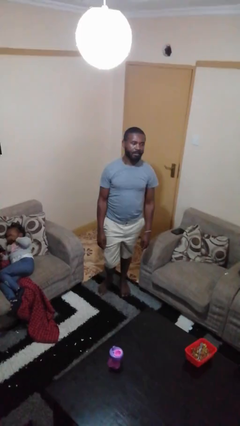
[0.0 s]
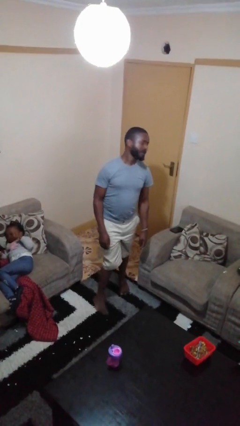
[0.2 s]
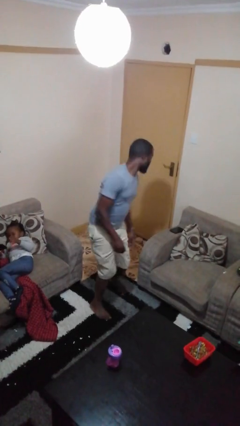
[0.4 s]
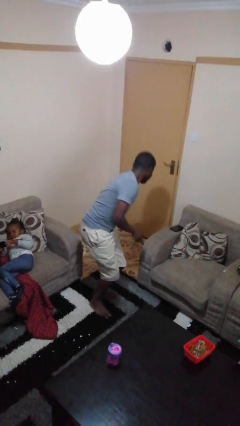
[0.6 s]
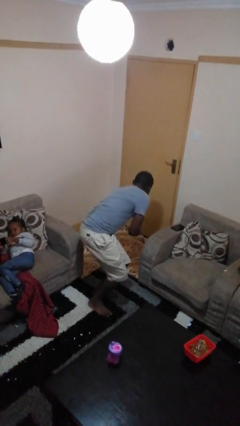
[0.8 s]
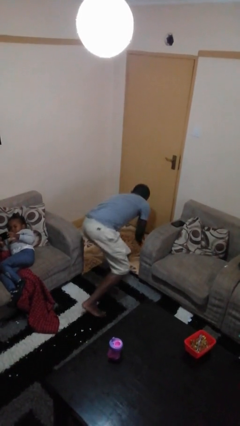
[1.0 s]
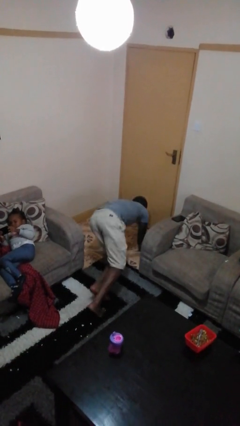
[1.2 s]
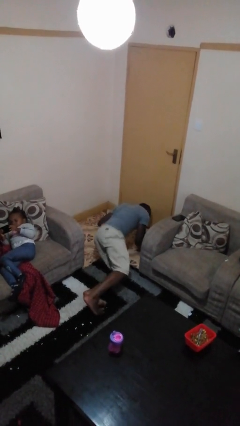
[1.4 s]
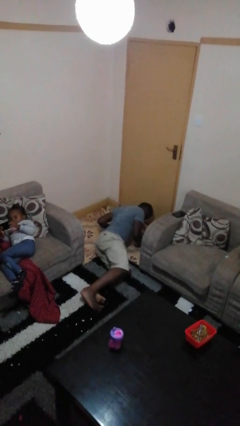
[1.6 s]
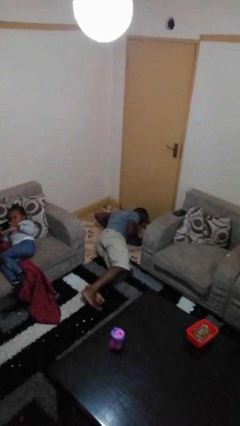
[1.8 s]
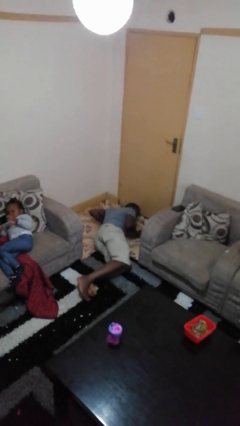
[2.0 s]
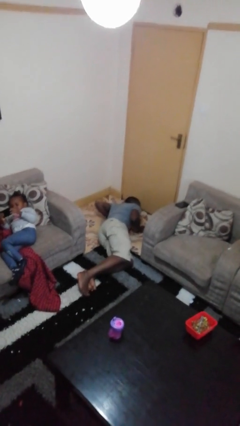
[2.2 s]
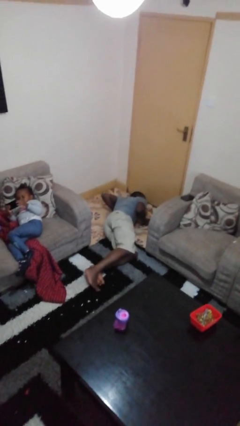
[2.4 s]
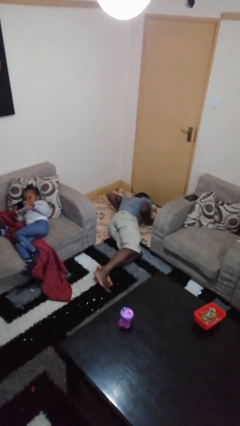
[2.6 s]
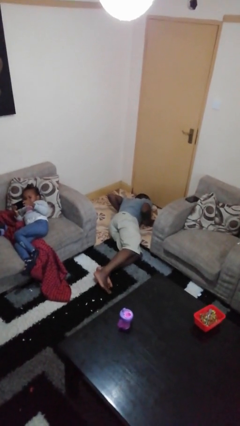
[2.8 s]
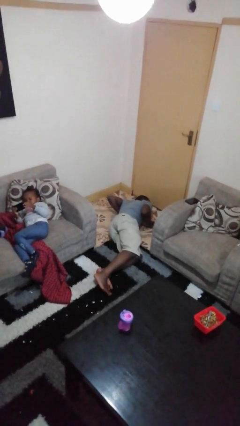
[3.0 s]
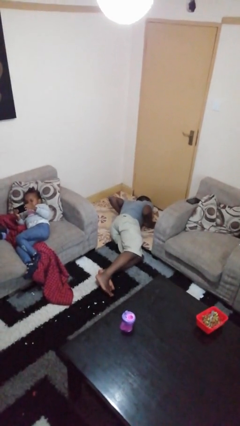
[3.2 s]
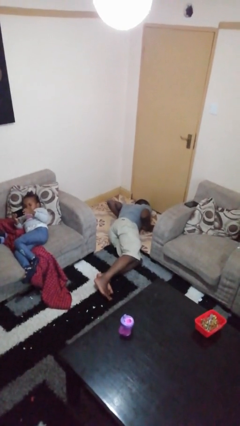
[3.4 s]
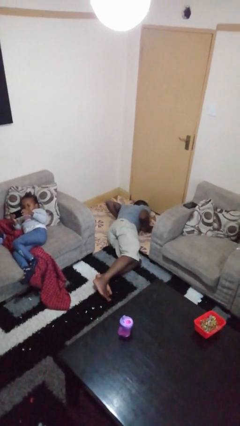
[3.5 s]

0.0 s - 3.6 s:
person falls while standing

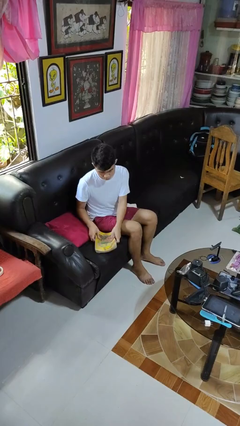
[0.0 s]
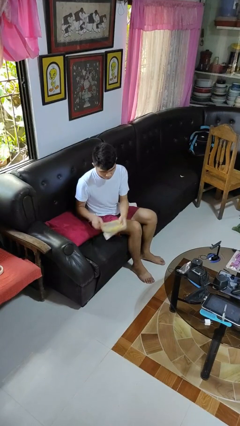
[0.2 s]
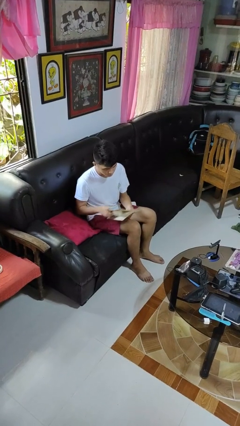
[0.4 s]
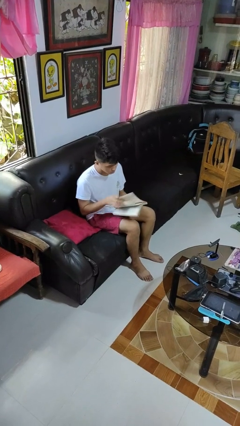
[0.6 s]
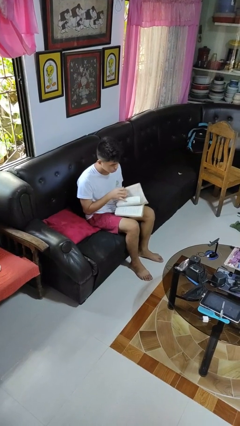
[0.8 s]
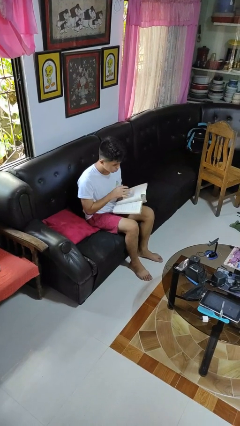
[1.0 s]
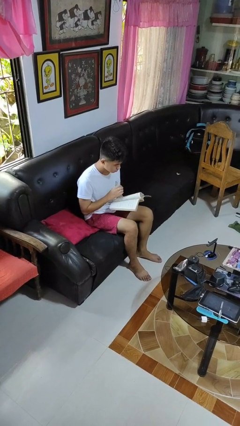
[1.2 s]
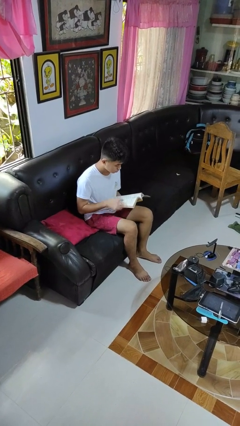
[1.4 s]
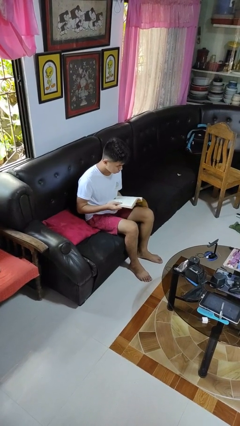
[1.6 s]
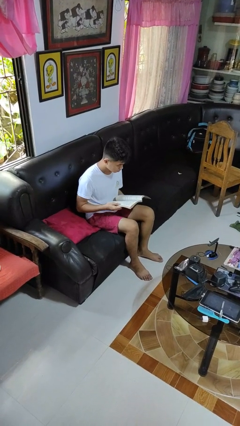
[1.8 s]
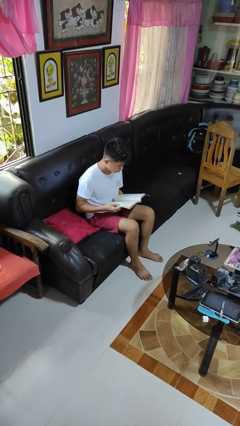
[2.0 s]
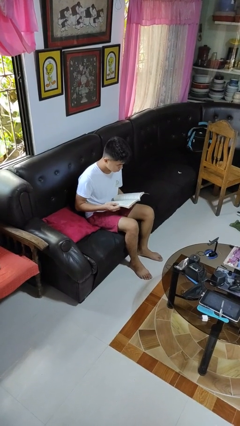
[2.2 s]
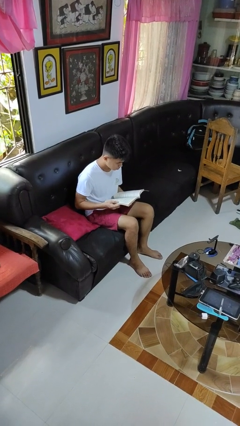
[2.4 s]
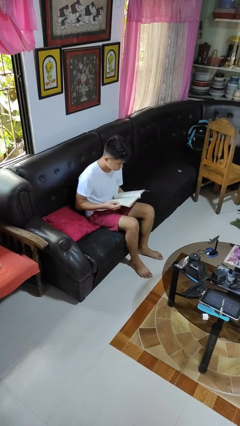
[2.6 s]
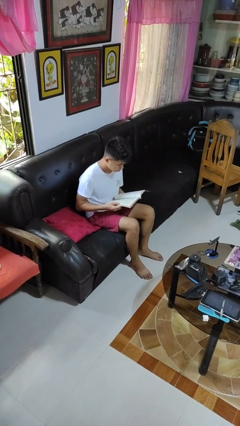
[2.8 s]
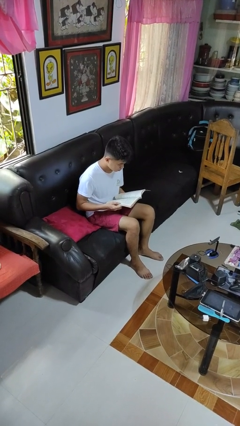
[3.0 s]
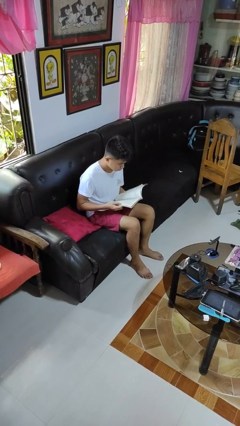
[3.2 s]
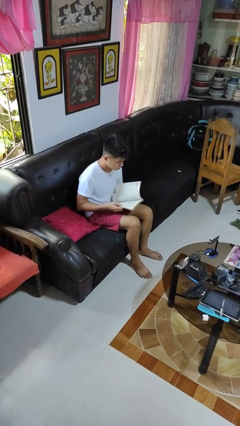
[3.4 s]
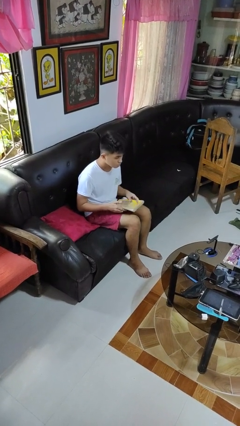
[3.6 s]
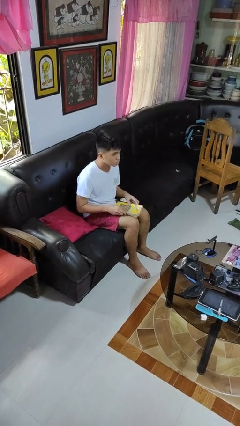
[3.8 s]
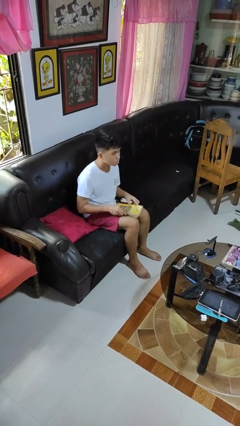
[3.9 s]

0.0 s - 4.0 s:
person reads book

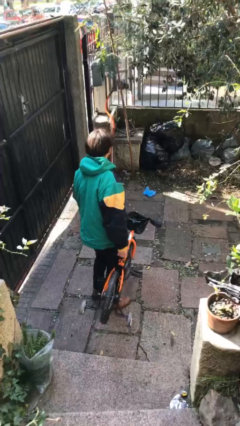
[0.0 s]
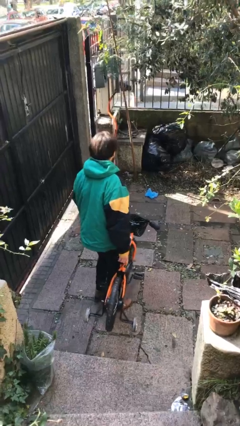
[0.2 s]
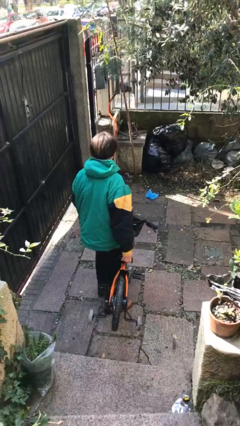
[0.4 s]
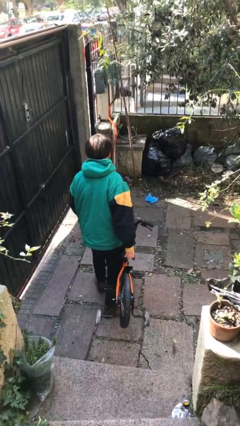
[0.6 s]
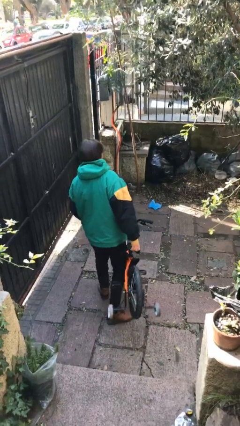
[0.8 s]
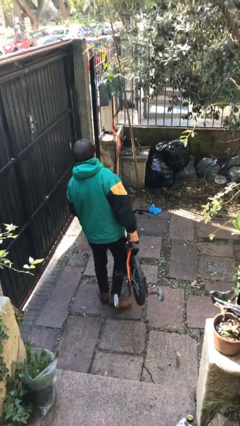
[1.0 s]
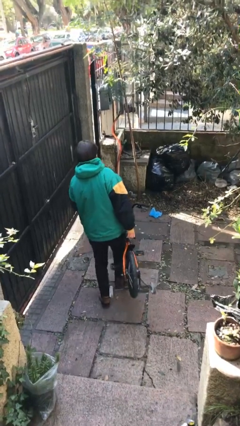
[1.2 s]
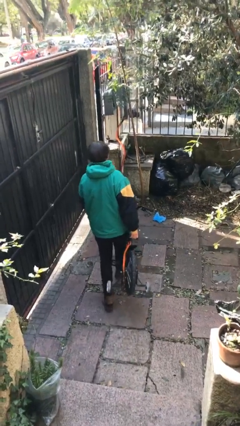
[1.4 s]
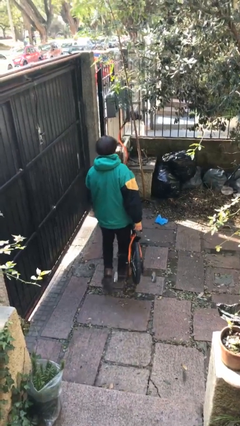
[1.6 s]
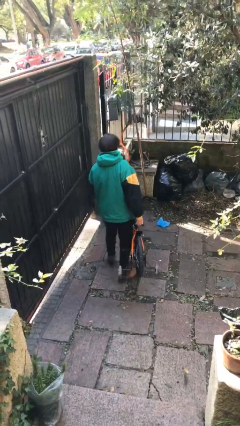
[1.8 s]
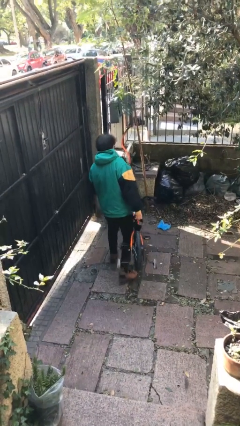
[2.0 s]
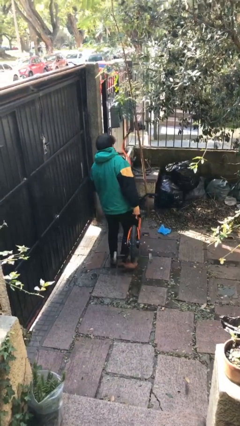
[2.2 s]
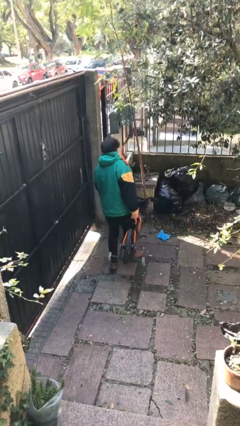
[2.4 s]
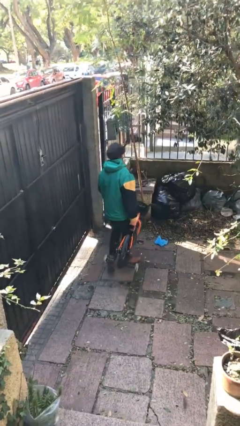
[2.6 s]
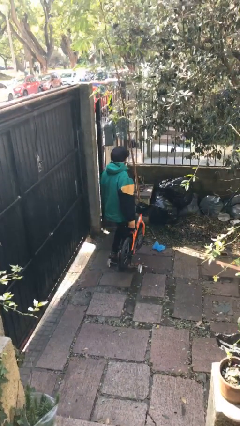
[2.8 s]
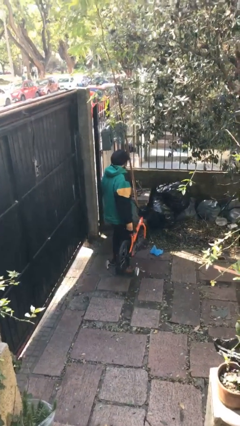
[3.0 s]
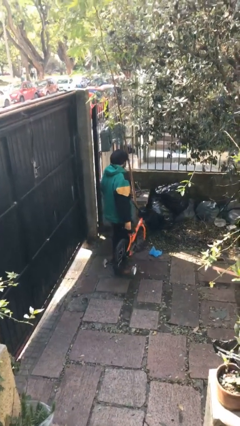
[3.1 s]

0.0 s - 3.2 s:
person carries bicycle

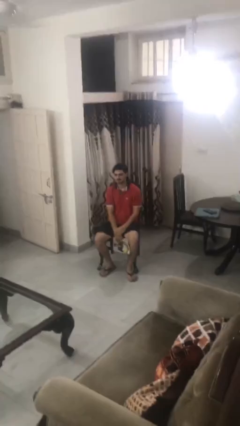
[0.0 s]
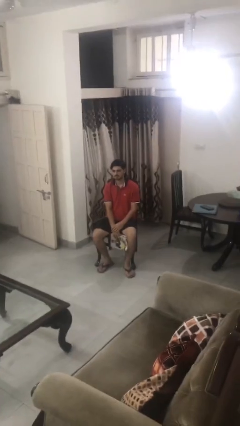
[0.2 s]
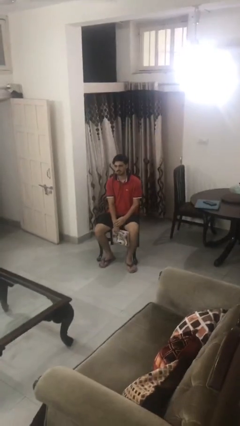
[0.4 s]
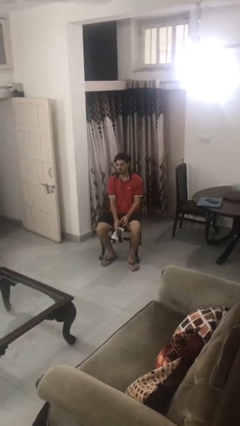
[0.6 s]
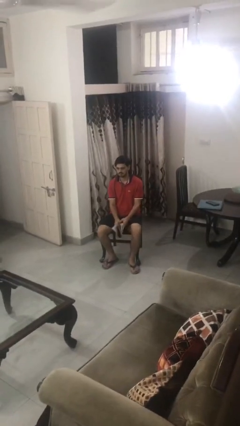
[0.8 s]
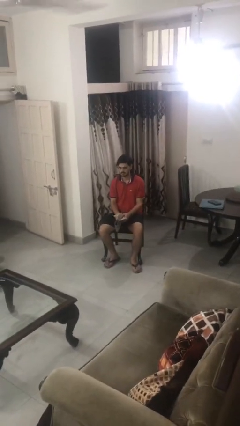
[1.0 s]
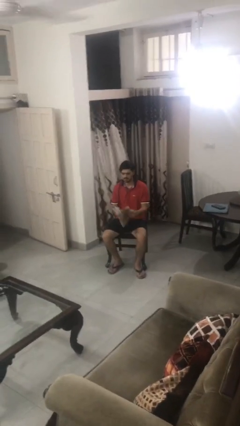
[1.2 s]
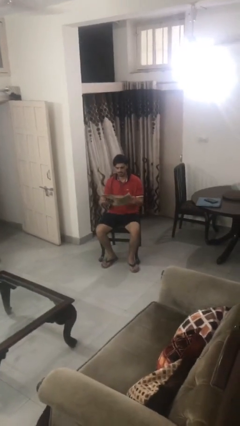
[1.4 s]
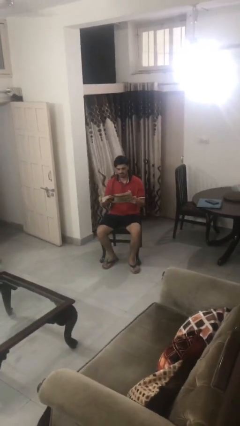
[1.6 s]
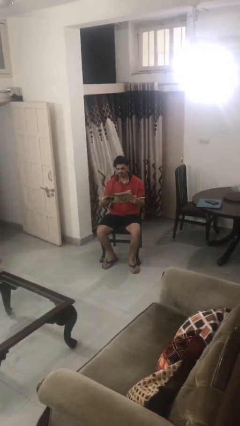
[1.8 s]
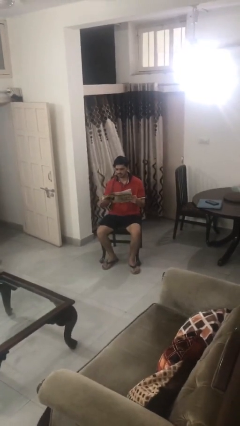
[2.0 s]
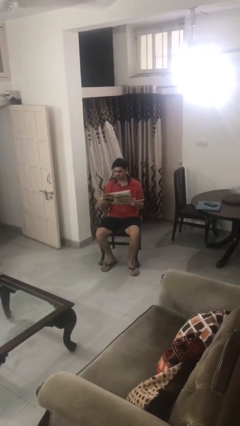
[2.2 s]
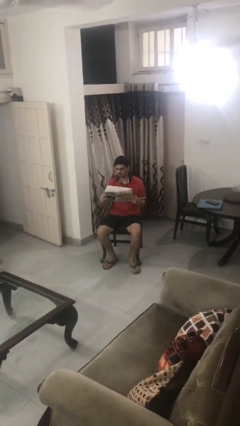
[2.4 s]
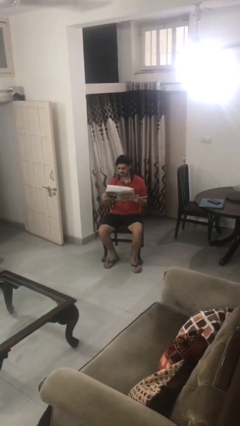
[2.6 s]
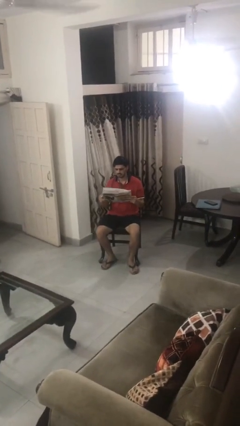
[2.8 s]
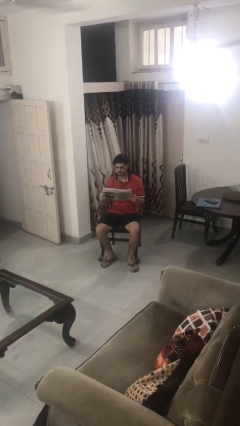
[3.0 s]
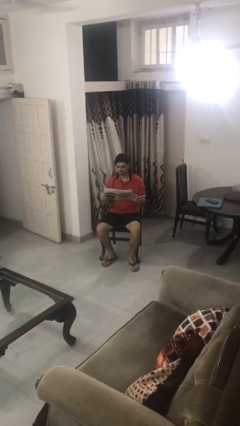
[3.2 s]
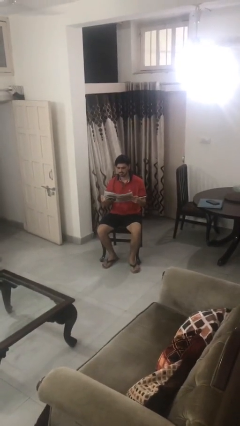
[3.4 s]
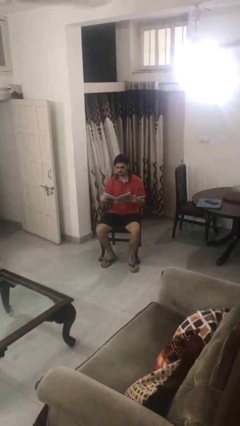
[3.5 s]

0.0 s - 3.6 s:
person reads newspaper

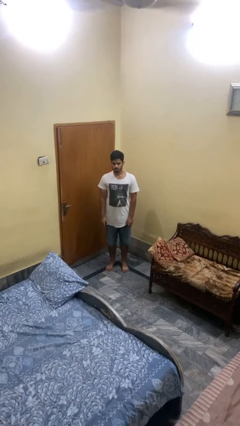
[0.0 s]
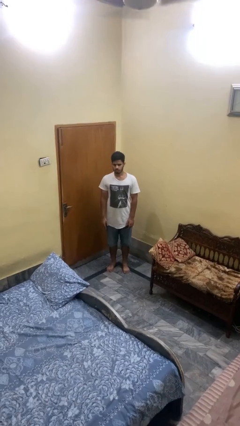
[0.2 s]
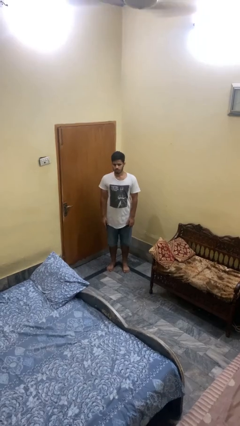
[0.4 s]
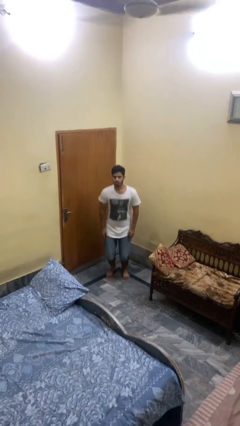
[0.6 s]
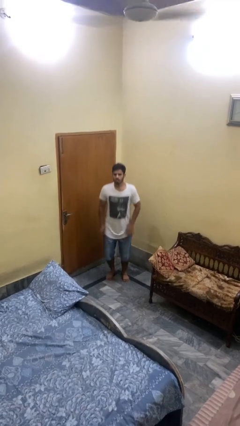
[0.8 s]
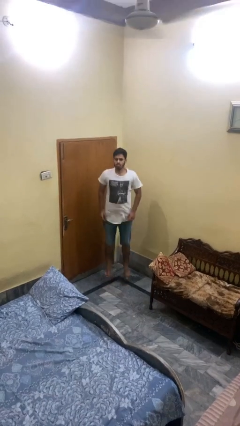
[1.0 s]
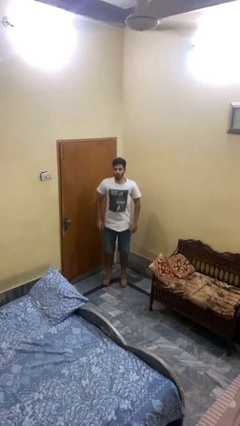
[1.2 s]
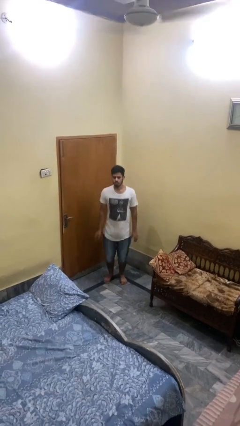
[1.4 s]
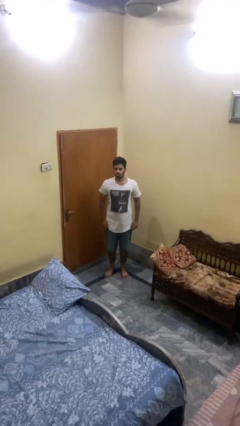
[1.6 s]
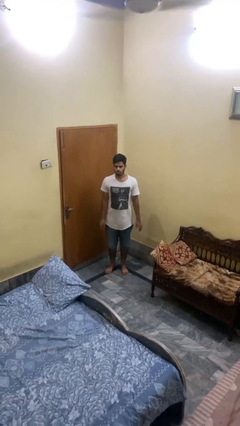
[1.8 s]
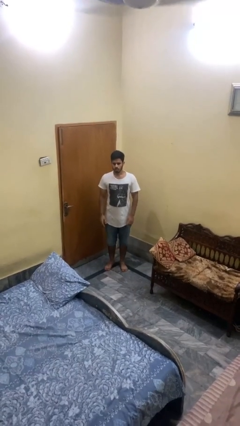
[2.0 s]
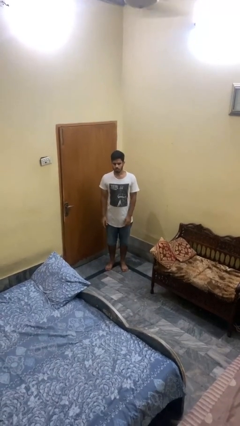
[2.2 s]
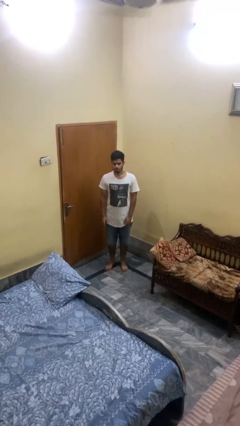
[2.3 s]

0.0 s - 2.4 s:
person jumps

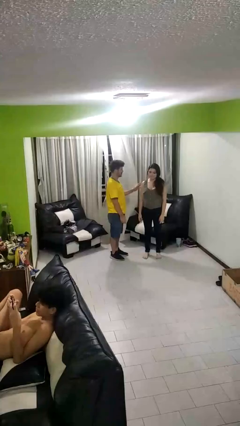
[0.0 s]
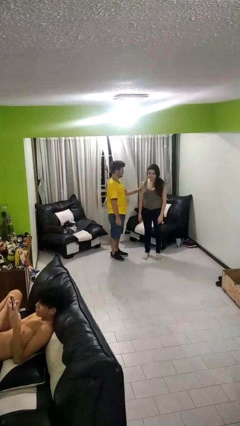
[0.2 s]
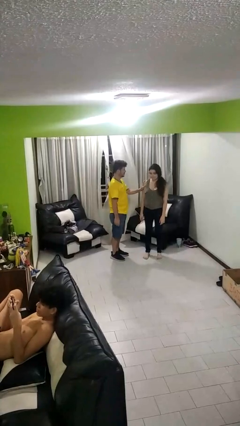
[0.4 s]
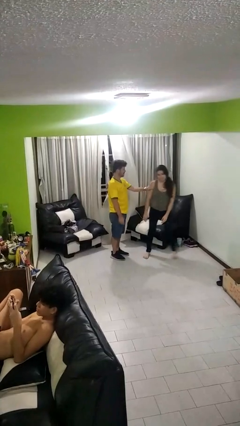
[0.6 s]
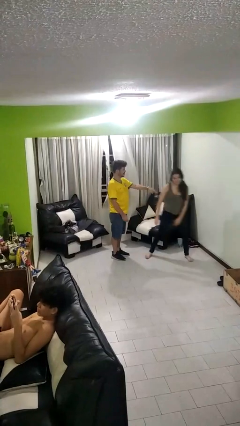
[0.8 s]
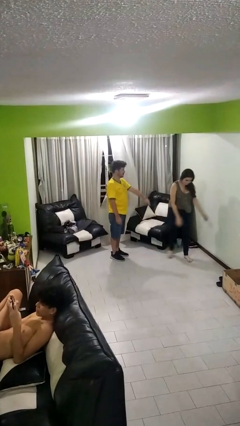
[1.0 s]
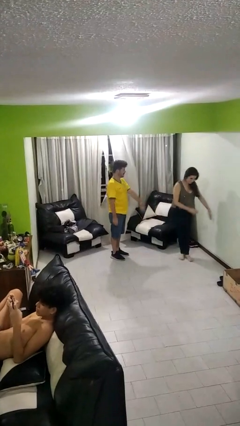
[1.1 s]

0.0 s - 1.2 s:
person shoves person
